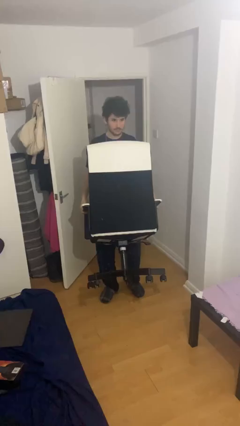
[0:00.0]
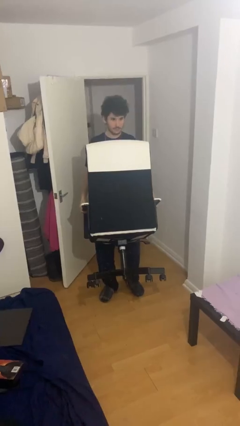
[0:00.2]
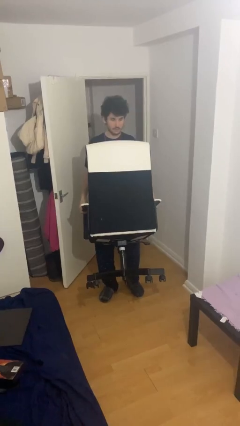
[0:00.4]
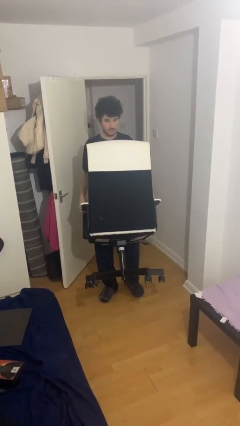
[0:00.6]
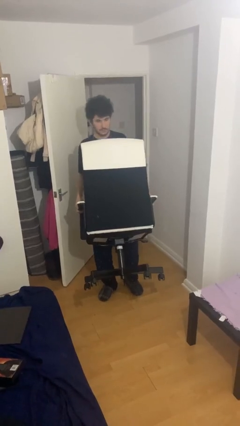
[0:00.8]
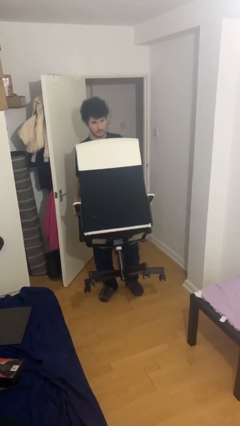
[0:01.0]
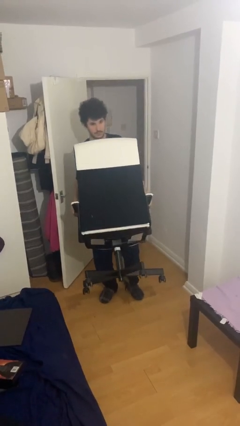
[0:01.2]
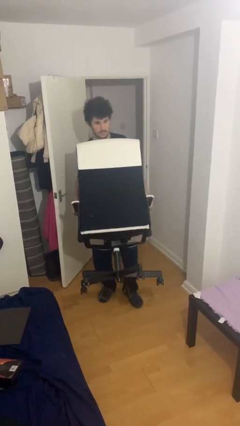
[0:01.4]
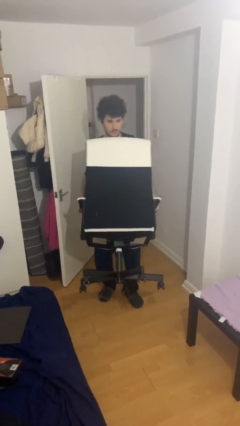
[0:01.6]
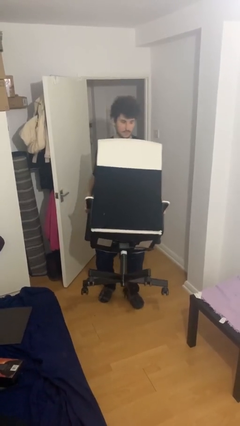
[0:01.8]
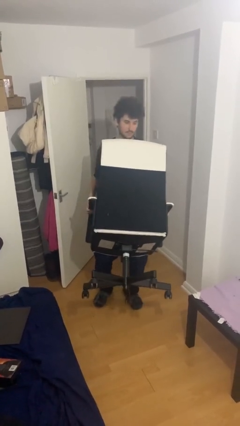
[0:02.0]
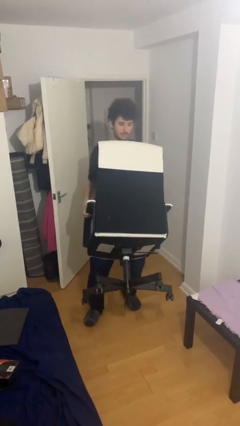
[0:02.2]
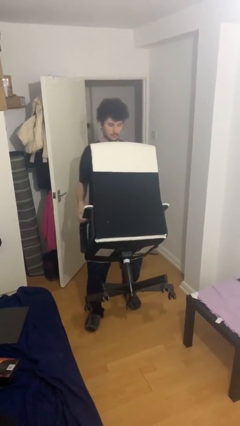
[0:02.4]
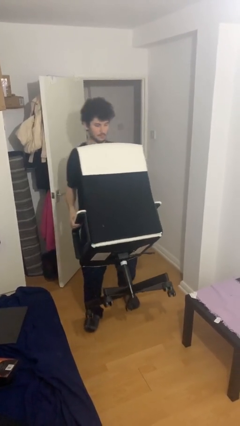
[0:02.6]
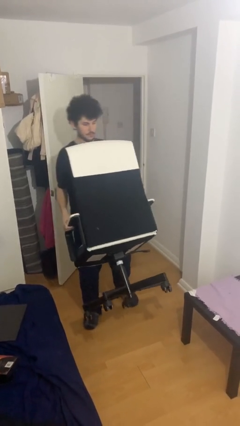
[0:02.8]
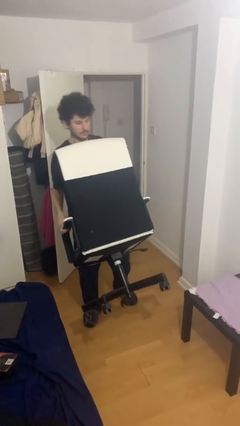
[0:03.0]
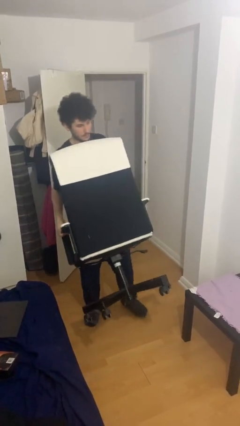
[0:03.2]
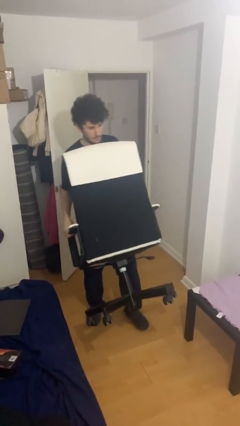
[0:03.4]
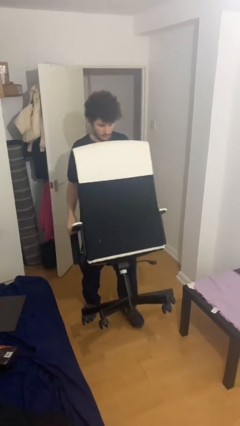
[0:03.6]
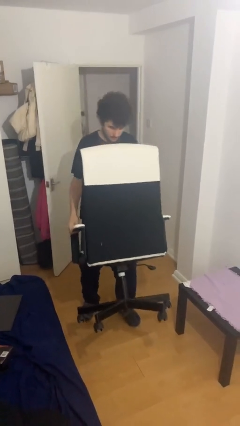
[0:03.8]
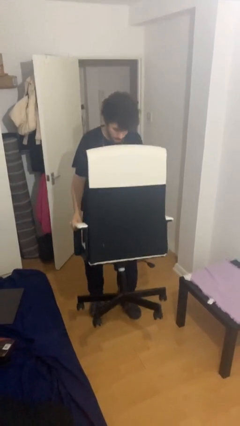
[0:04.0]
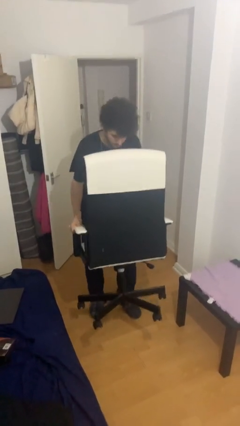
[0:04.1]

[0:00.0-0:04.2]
person carries heavy object

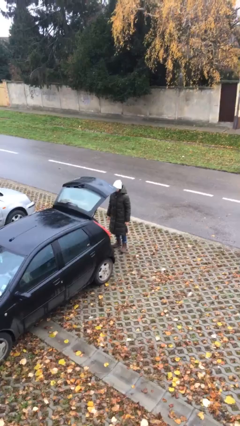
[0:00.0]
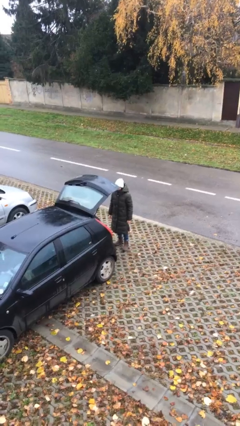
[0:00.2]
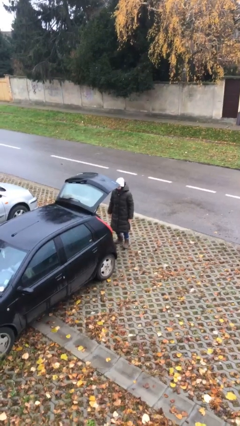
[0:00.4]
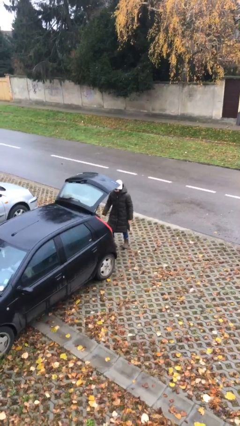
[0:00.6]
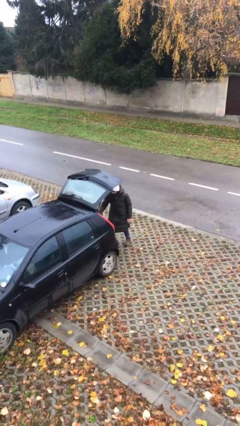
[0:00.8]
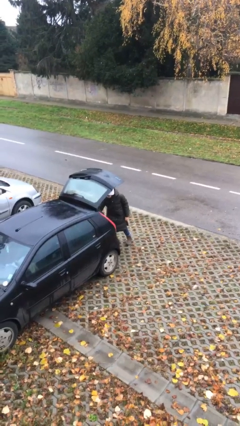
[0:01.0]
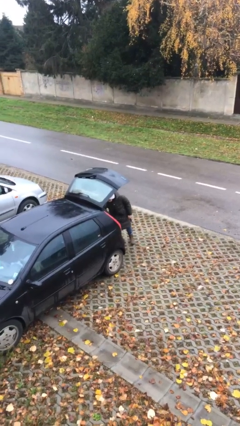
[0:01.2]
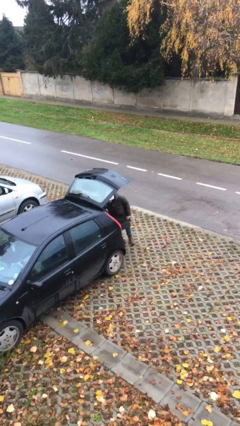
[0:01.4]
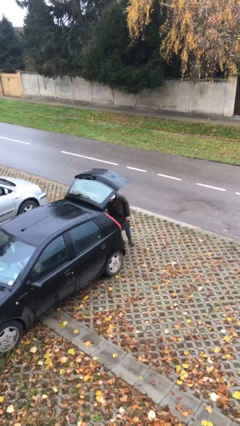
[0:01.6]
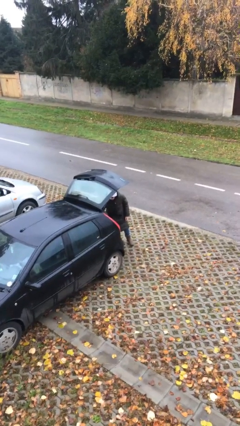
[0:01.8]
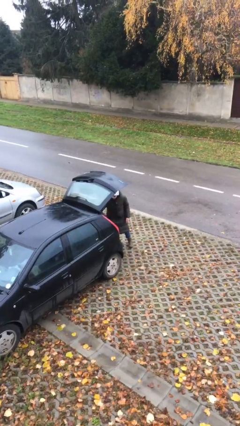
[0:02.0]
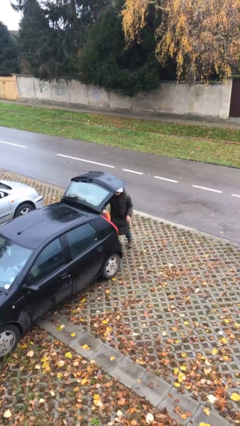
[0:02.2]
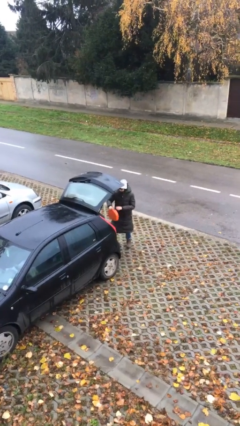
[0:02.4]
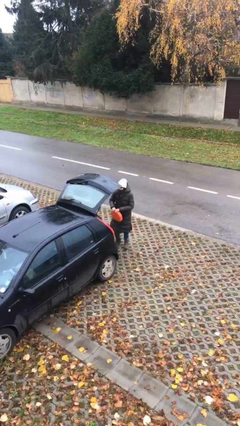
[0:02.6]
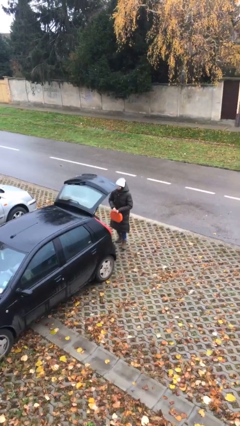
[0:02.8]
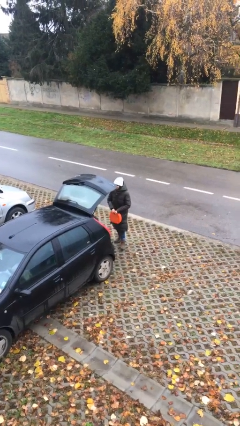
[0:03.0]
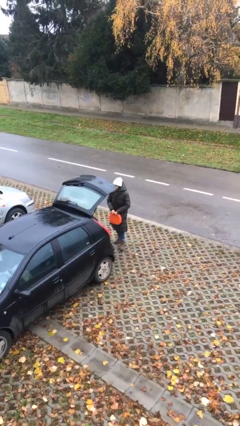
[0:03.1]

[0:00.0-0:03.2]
person unloads car

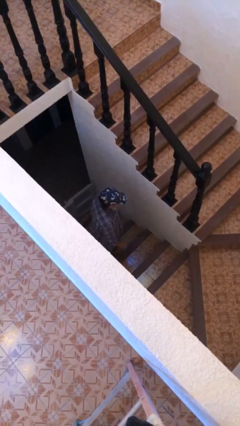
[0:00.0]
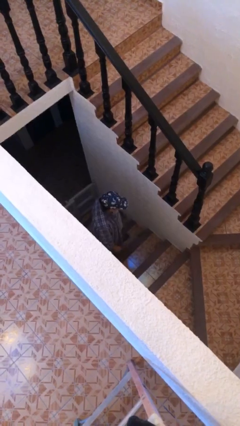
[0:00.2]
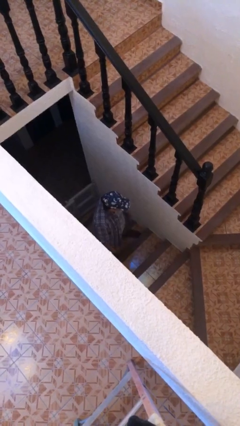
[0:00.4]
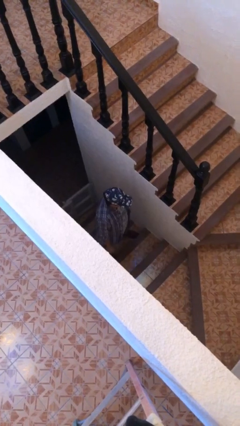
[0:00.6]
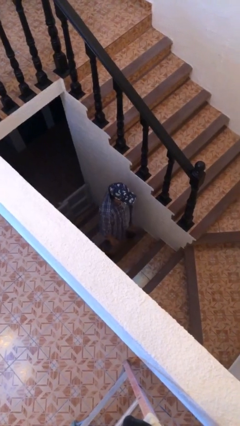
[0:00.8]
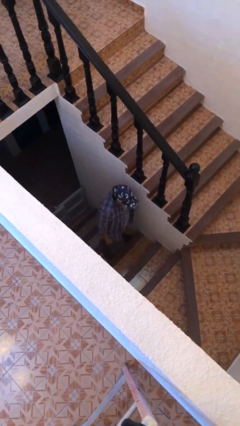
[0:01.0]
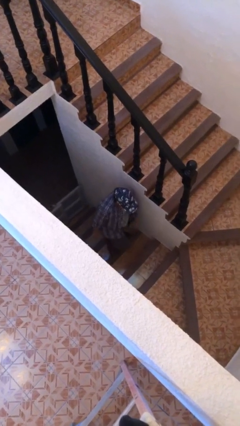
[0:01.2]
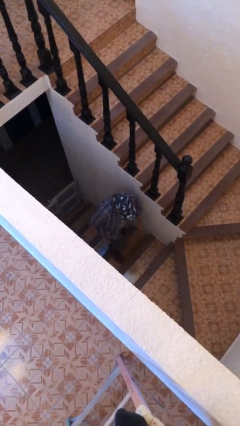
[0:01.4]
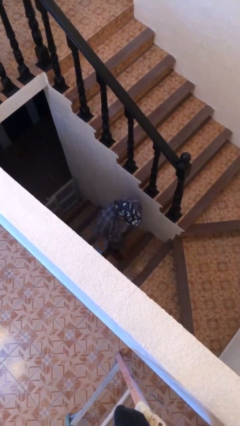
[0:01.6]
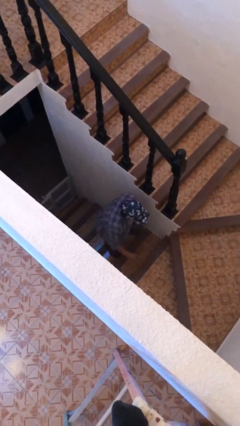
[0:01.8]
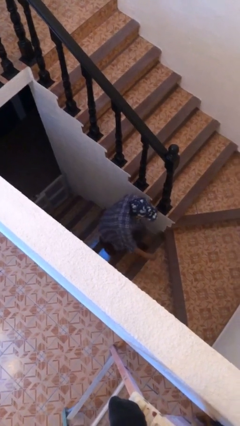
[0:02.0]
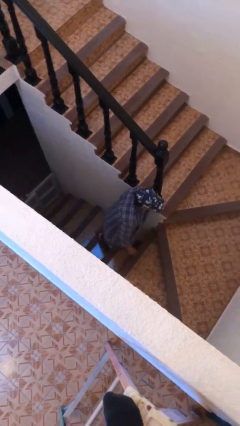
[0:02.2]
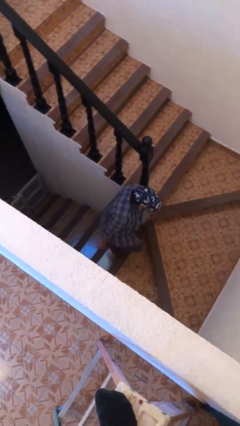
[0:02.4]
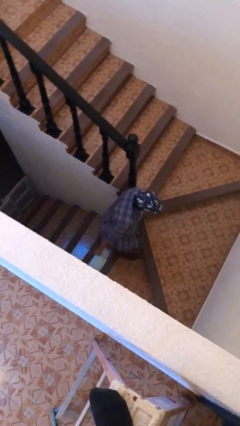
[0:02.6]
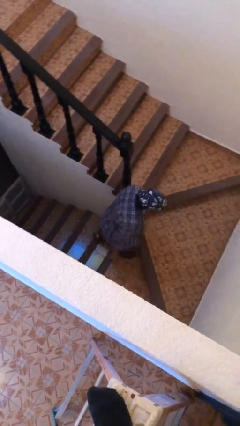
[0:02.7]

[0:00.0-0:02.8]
person climbs up stairs

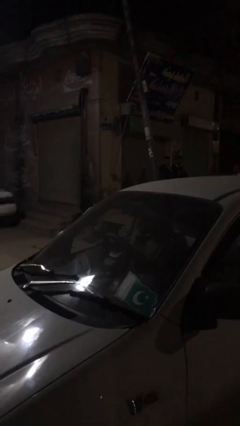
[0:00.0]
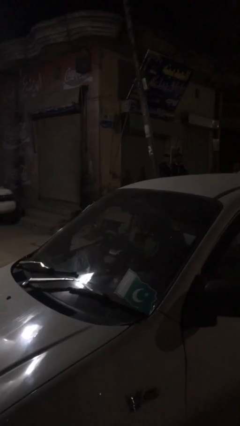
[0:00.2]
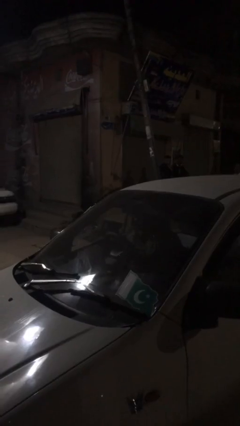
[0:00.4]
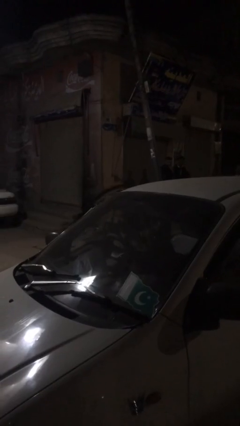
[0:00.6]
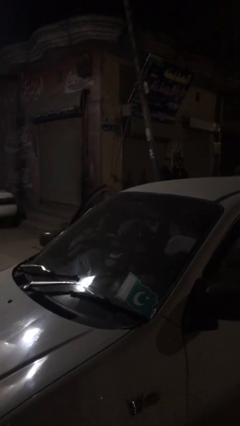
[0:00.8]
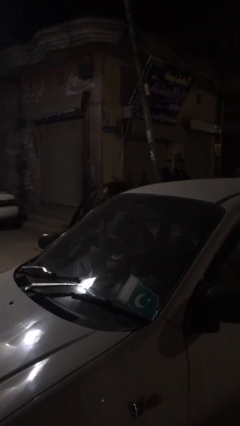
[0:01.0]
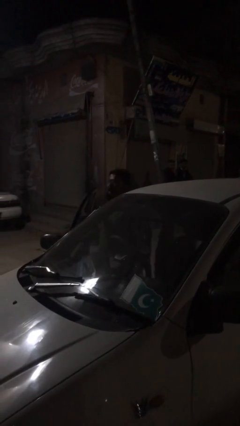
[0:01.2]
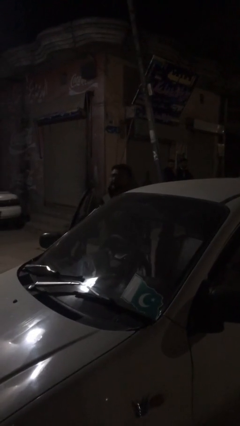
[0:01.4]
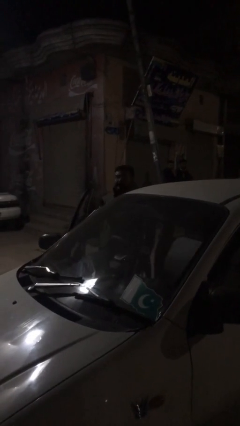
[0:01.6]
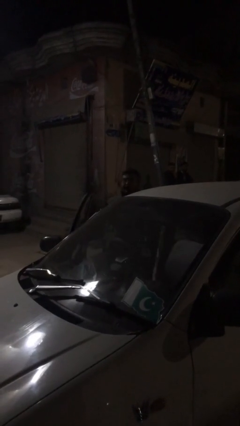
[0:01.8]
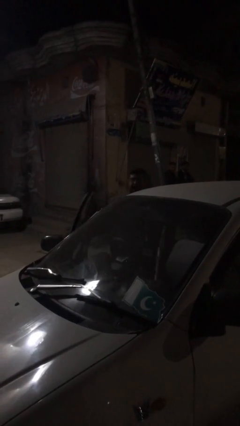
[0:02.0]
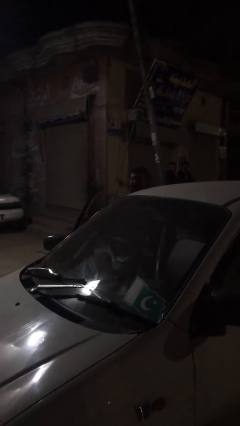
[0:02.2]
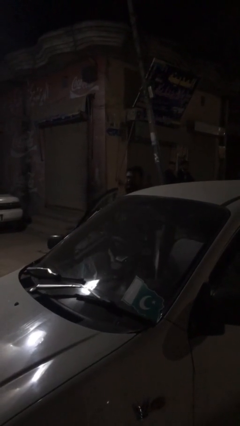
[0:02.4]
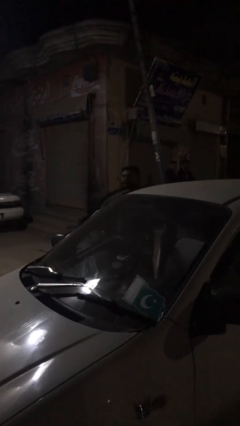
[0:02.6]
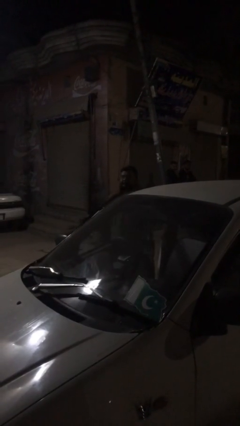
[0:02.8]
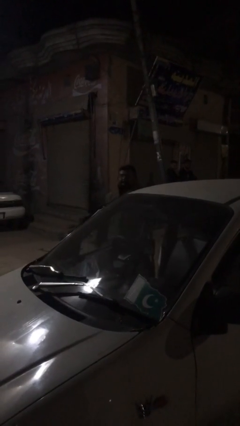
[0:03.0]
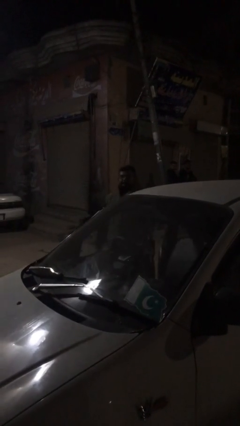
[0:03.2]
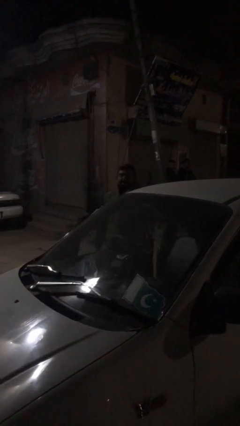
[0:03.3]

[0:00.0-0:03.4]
person exits car

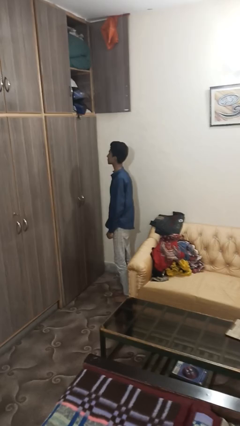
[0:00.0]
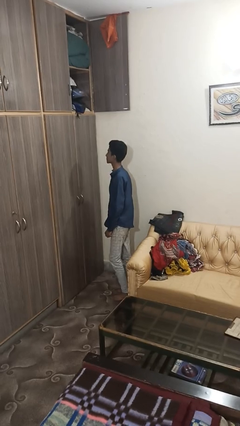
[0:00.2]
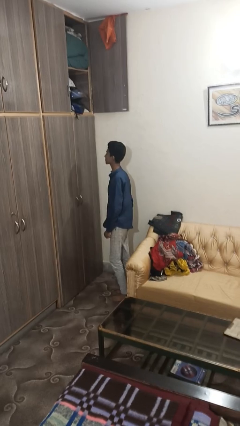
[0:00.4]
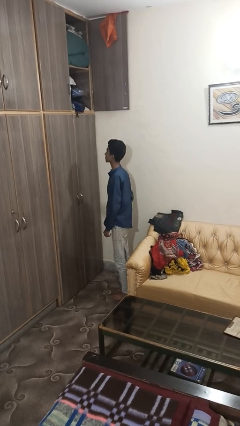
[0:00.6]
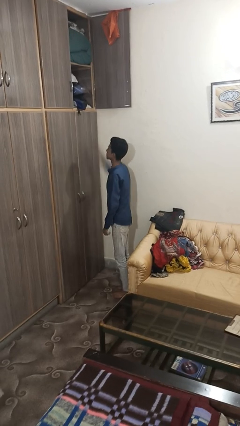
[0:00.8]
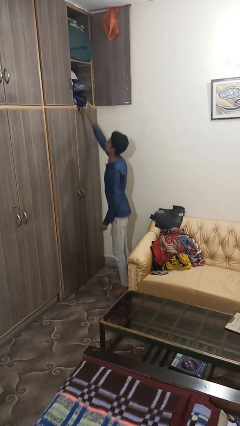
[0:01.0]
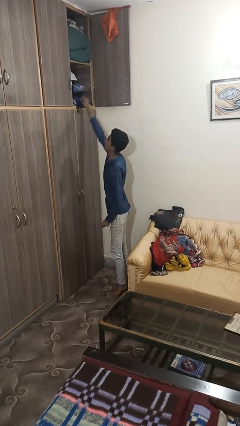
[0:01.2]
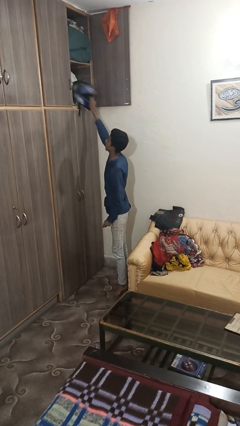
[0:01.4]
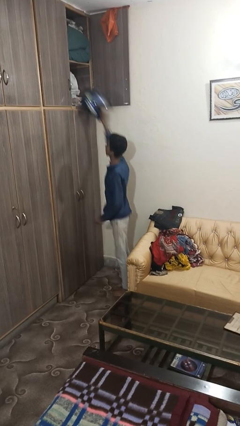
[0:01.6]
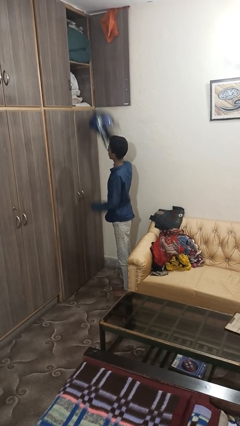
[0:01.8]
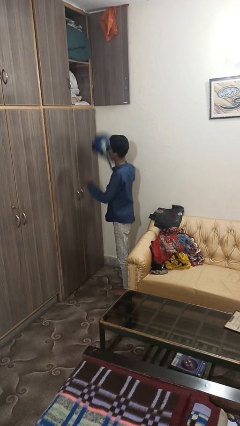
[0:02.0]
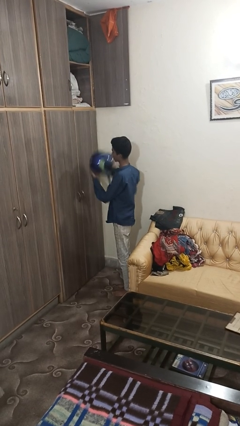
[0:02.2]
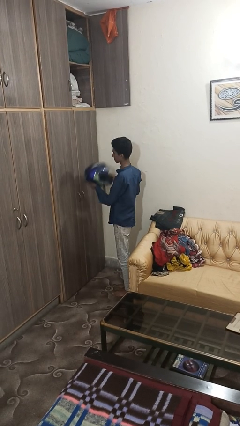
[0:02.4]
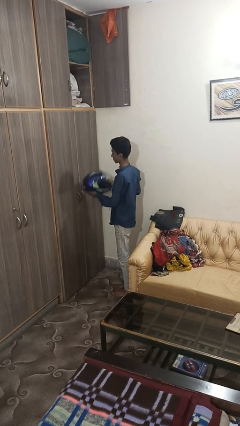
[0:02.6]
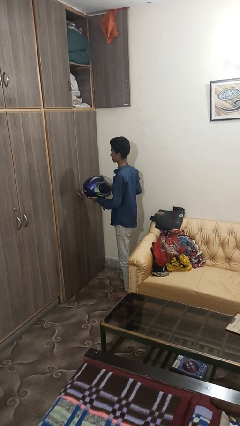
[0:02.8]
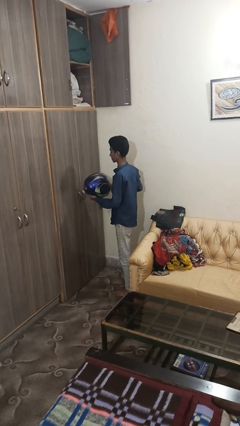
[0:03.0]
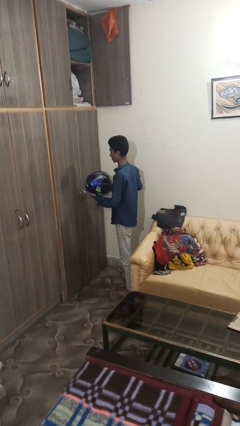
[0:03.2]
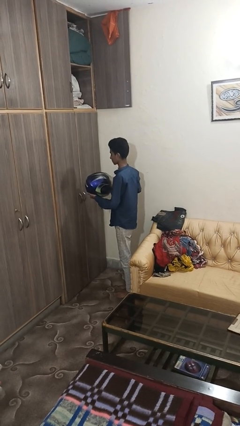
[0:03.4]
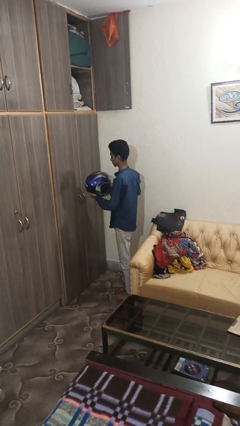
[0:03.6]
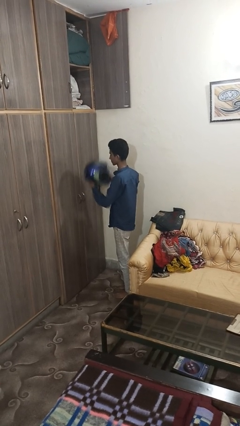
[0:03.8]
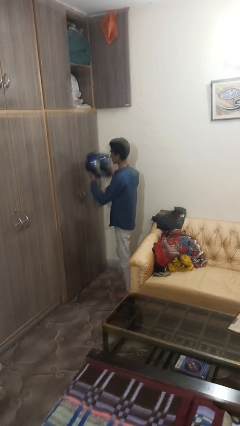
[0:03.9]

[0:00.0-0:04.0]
person picks up object from shelf
